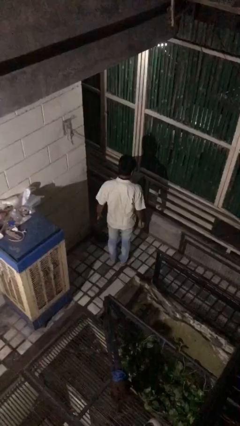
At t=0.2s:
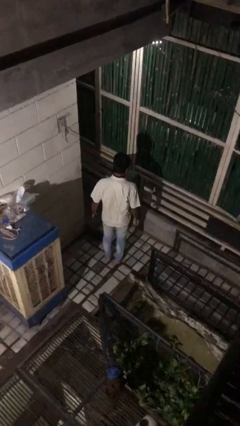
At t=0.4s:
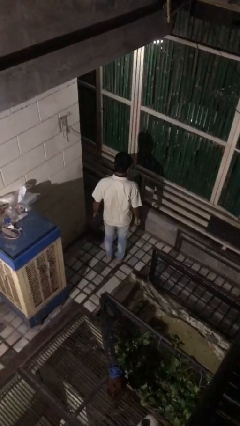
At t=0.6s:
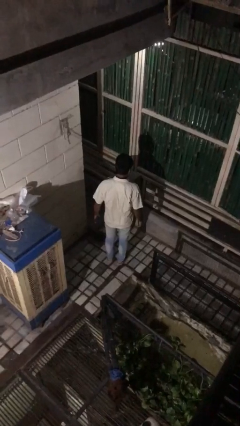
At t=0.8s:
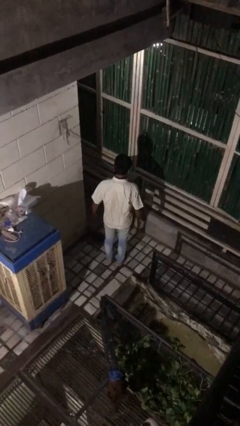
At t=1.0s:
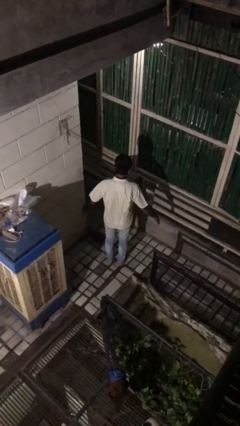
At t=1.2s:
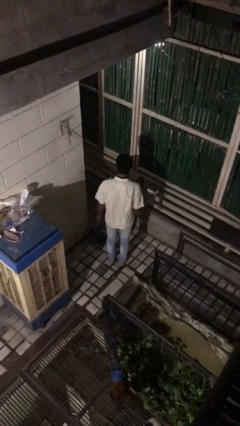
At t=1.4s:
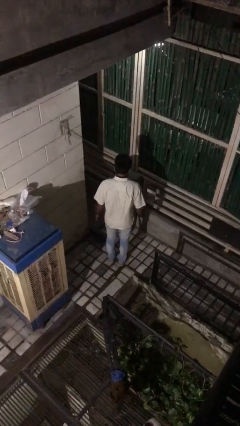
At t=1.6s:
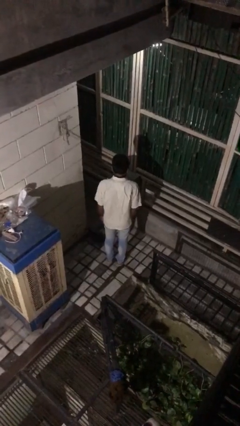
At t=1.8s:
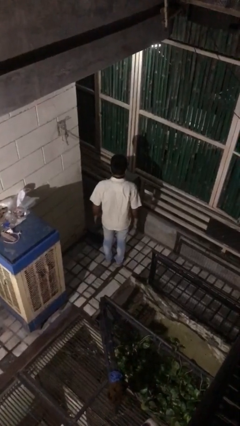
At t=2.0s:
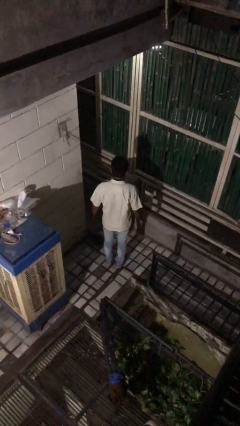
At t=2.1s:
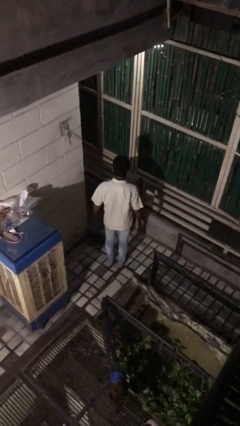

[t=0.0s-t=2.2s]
person slaps hands on thighs

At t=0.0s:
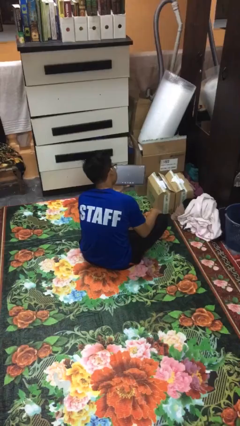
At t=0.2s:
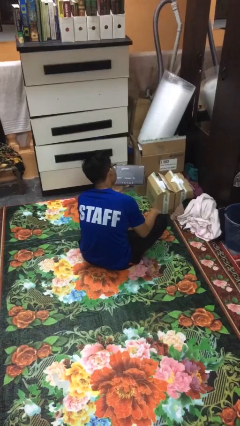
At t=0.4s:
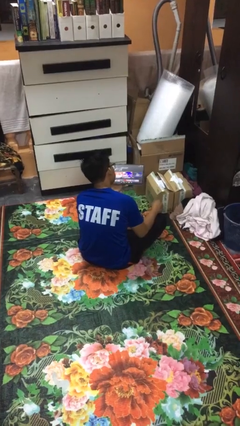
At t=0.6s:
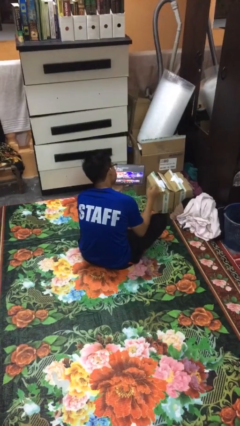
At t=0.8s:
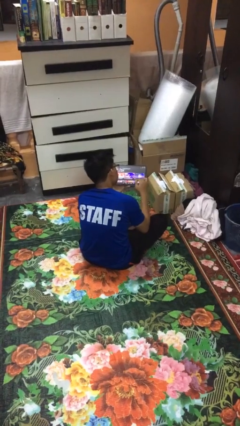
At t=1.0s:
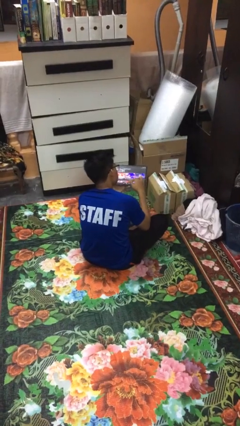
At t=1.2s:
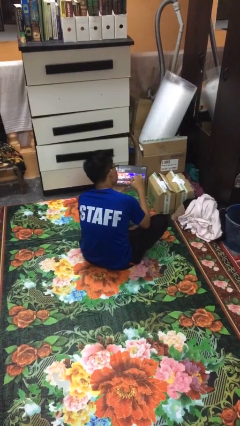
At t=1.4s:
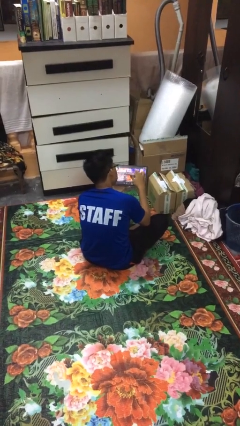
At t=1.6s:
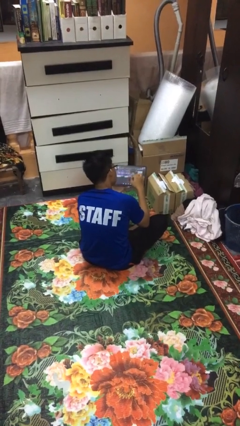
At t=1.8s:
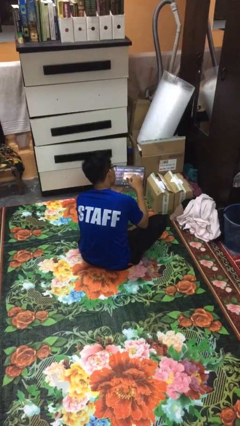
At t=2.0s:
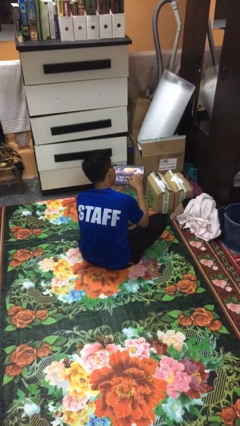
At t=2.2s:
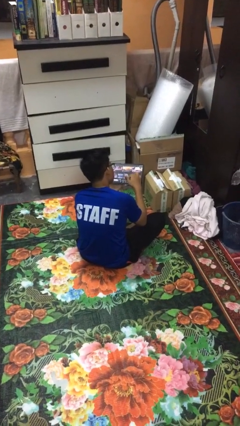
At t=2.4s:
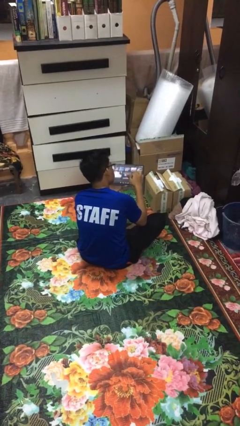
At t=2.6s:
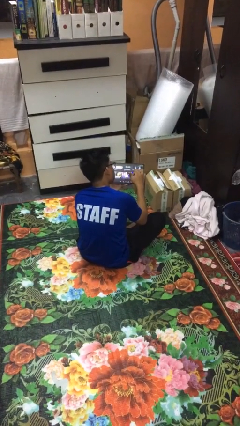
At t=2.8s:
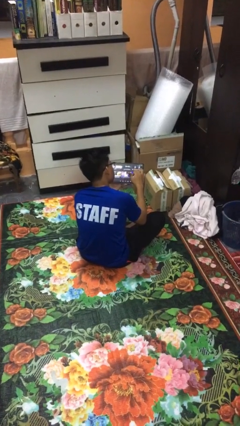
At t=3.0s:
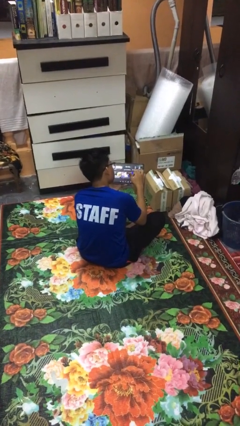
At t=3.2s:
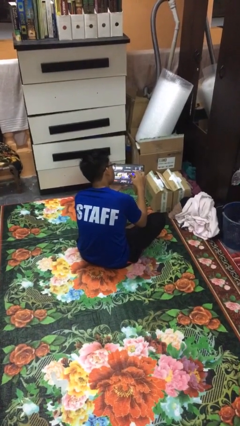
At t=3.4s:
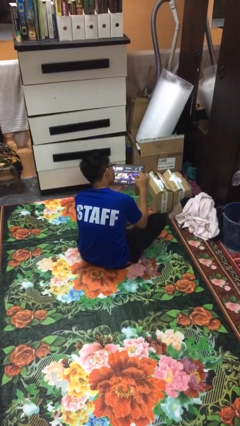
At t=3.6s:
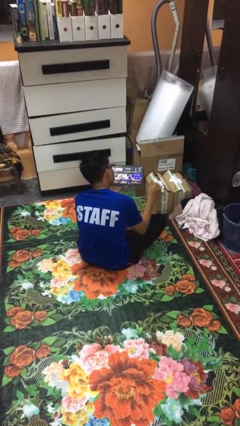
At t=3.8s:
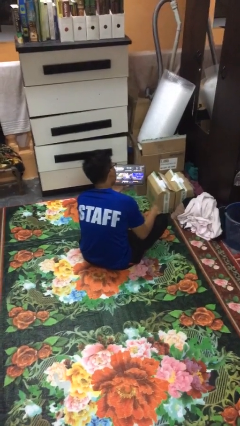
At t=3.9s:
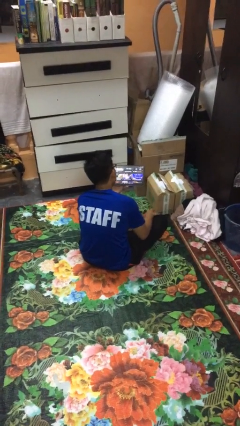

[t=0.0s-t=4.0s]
person interacts with tablet

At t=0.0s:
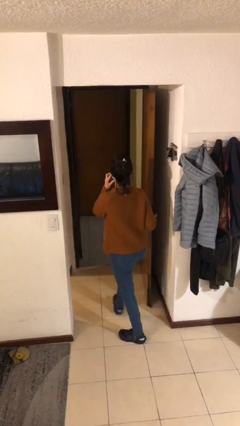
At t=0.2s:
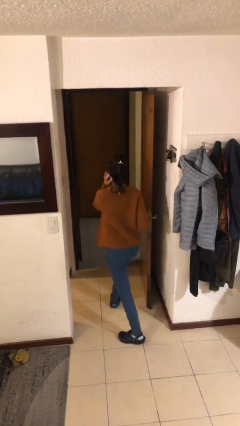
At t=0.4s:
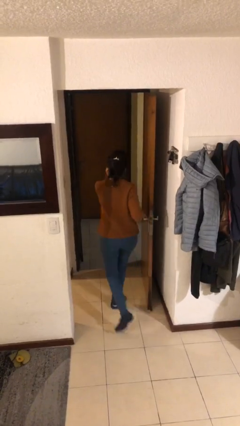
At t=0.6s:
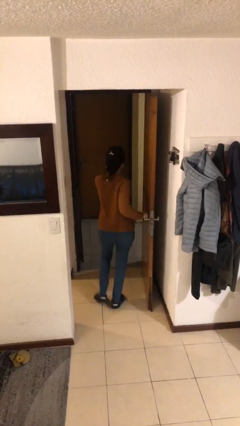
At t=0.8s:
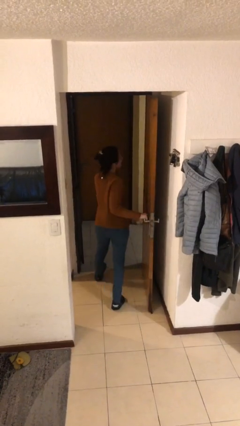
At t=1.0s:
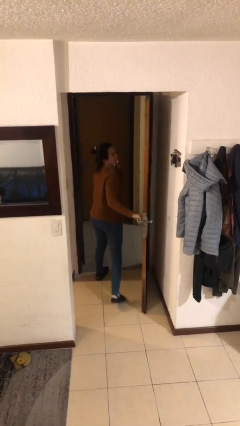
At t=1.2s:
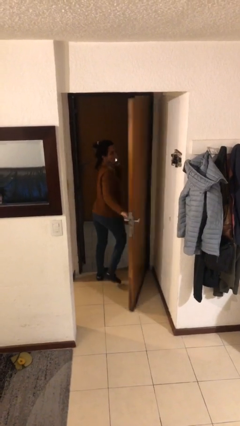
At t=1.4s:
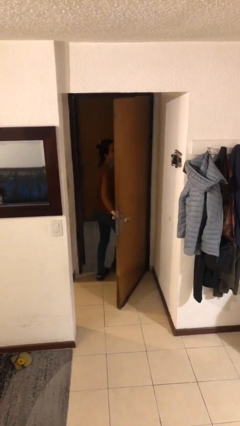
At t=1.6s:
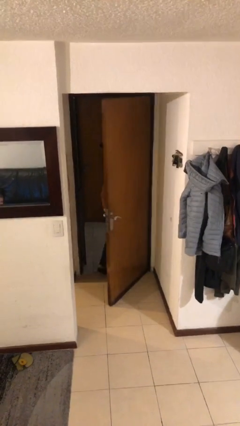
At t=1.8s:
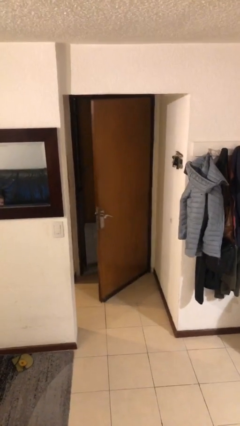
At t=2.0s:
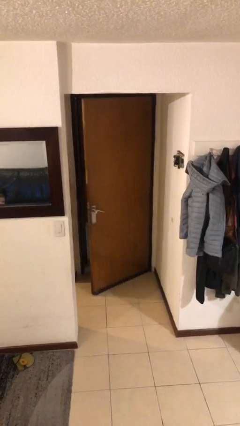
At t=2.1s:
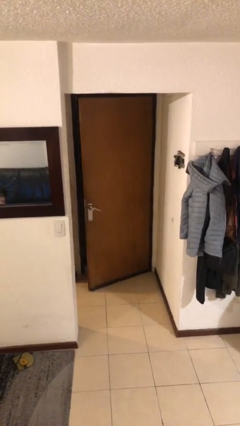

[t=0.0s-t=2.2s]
person exits scene through structure

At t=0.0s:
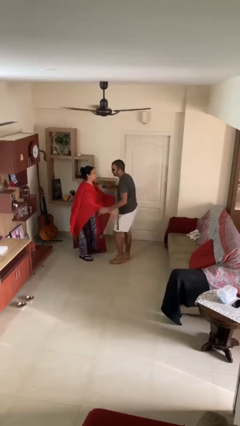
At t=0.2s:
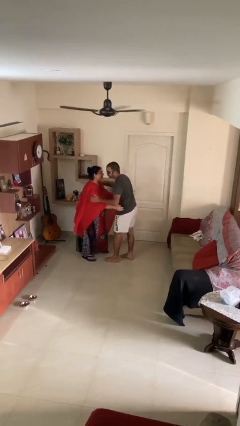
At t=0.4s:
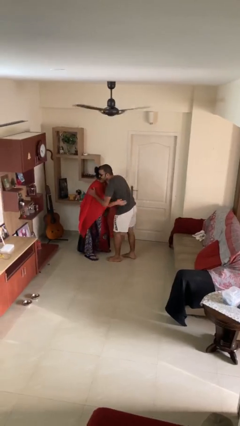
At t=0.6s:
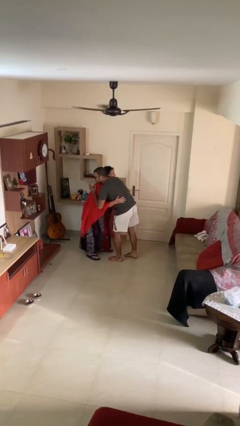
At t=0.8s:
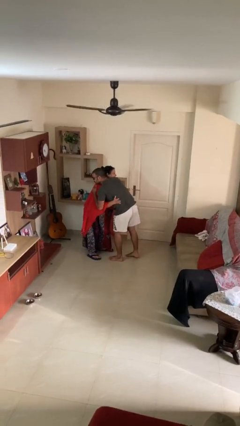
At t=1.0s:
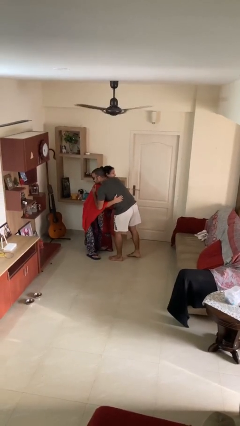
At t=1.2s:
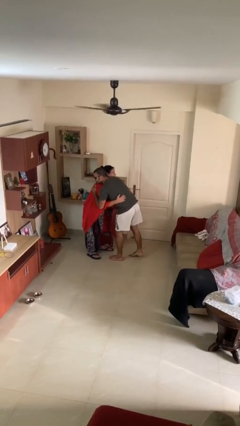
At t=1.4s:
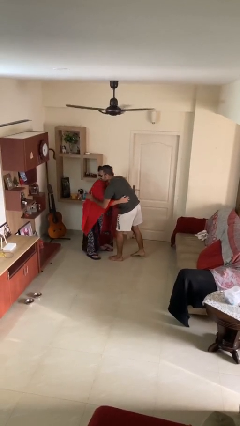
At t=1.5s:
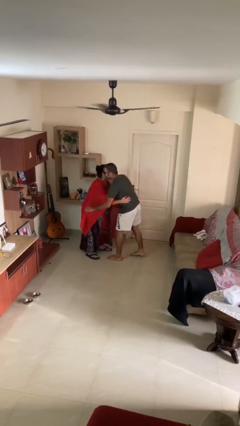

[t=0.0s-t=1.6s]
person embraces person

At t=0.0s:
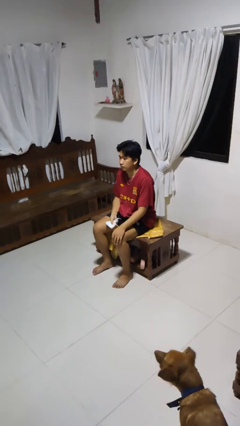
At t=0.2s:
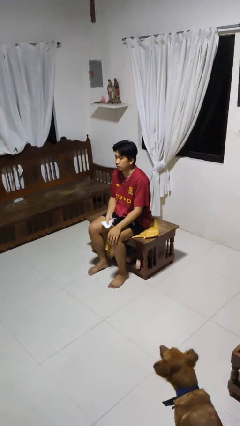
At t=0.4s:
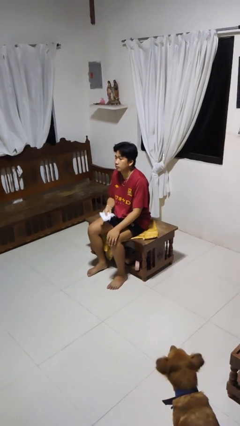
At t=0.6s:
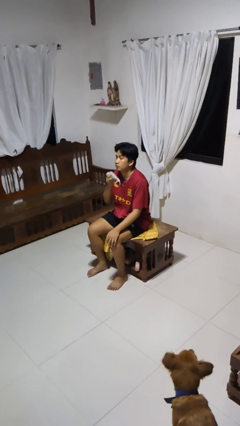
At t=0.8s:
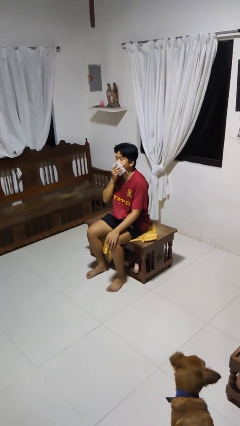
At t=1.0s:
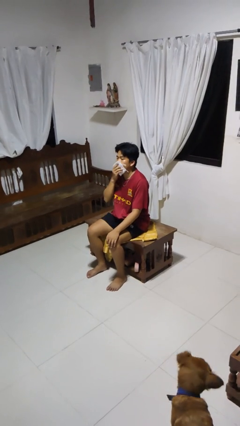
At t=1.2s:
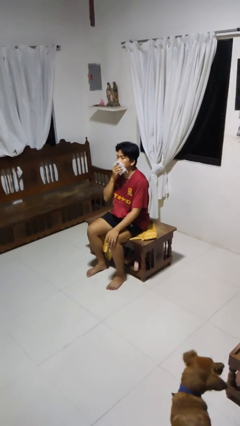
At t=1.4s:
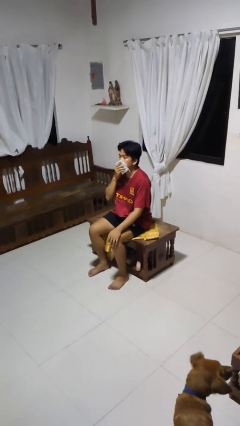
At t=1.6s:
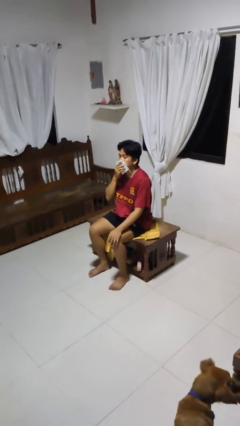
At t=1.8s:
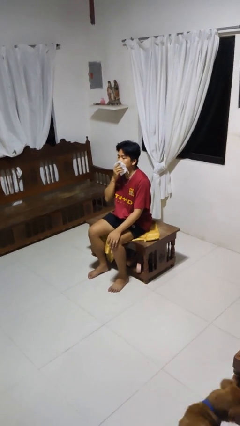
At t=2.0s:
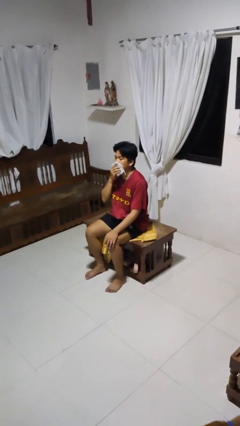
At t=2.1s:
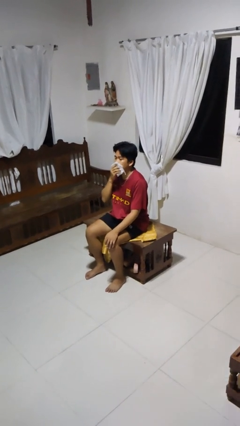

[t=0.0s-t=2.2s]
person wipes mouth with napkin

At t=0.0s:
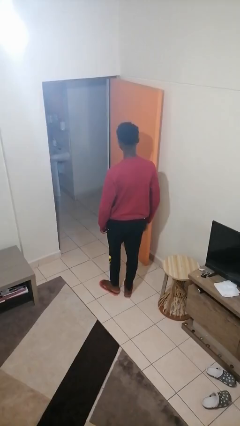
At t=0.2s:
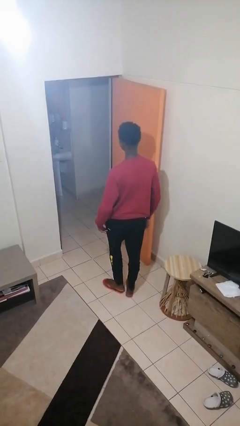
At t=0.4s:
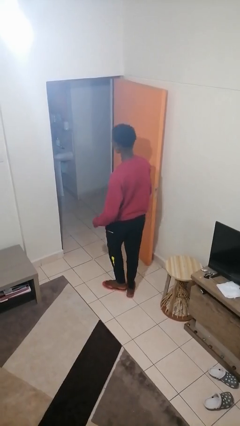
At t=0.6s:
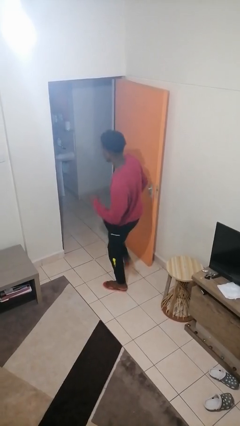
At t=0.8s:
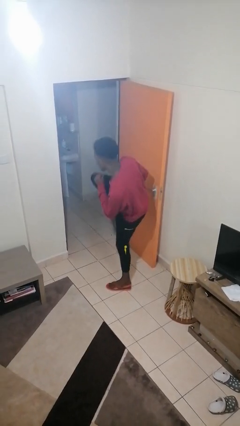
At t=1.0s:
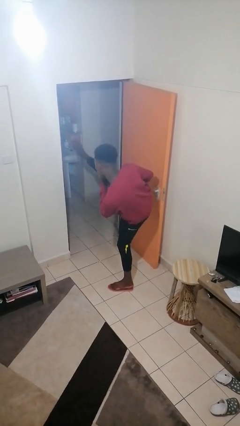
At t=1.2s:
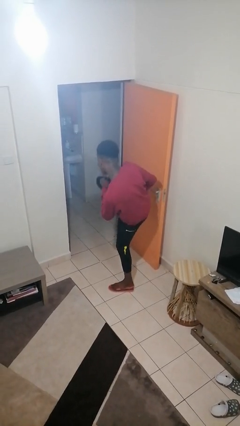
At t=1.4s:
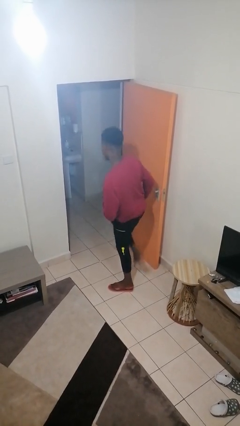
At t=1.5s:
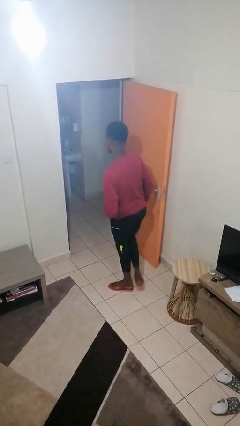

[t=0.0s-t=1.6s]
person karate kicks

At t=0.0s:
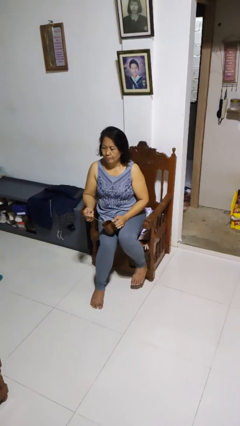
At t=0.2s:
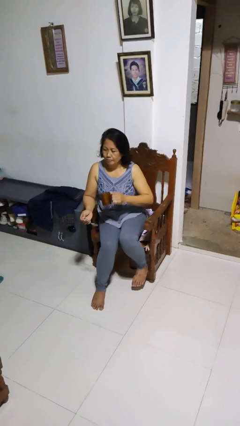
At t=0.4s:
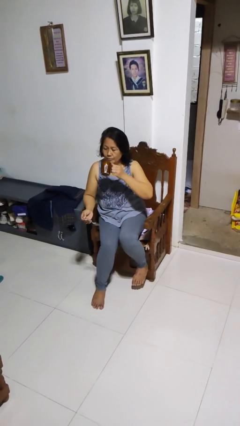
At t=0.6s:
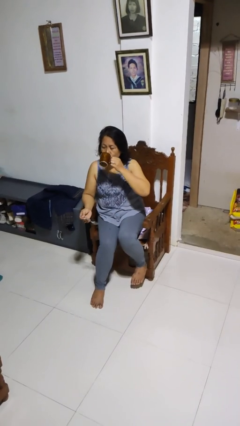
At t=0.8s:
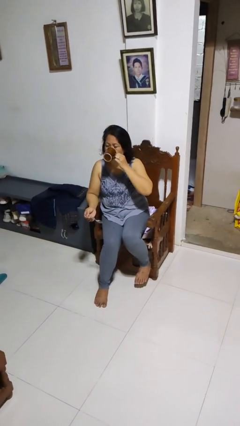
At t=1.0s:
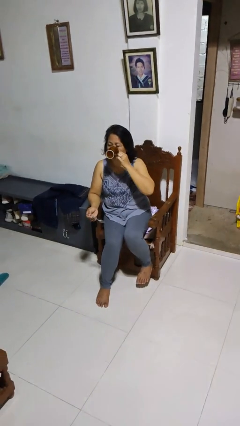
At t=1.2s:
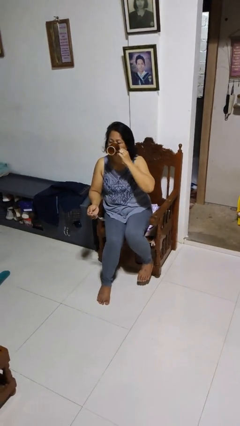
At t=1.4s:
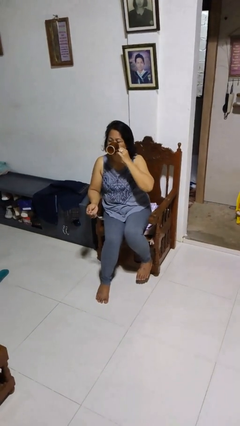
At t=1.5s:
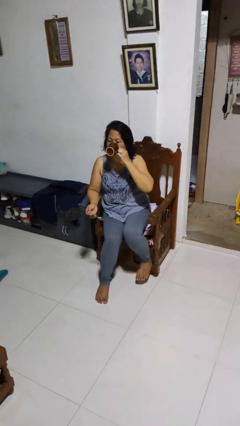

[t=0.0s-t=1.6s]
person drinks from mug

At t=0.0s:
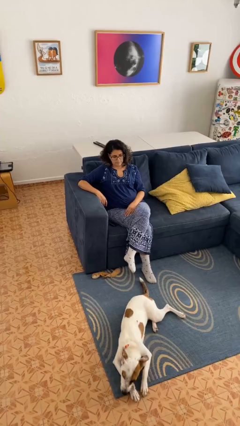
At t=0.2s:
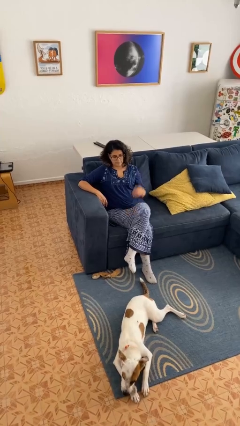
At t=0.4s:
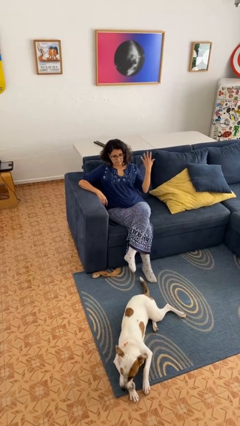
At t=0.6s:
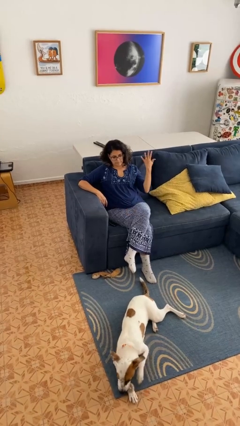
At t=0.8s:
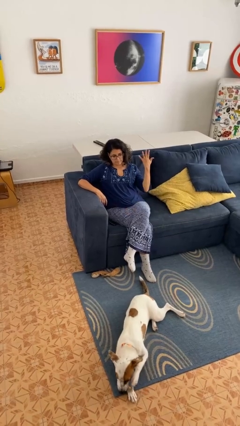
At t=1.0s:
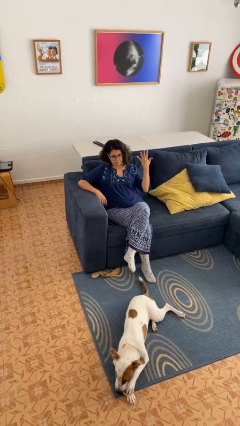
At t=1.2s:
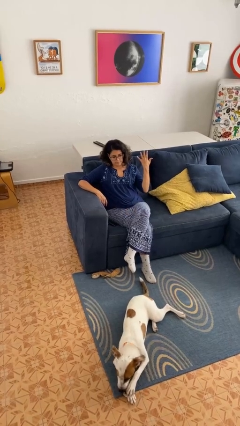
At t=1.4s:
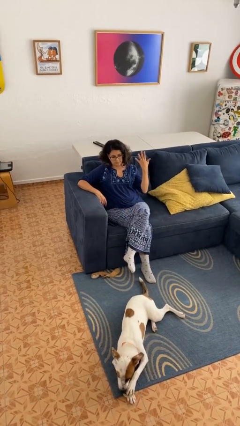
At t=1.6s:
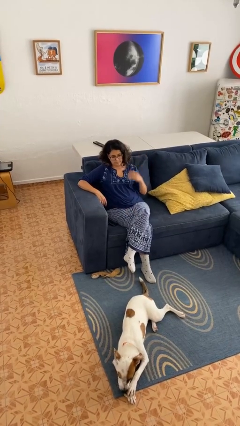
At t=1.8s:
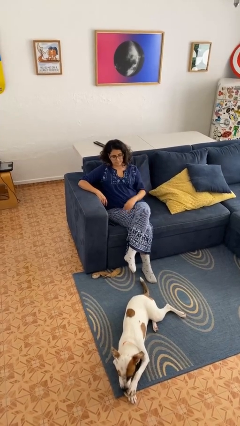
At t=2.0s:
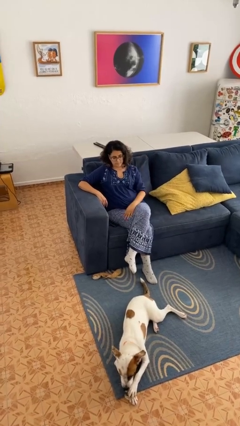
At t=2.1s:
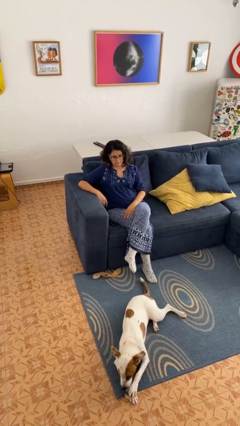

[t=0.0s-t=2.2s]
person gestures number five
